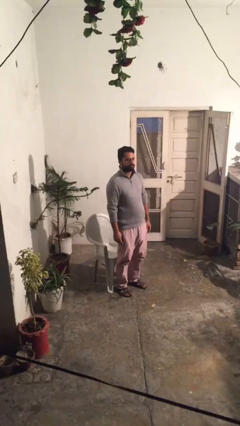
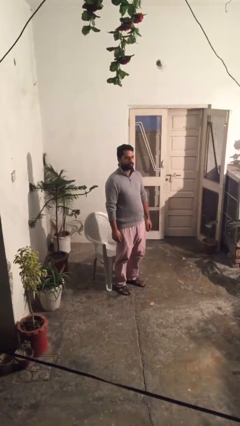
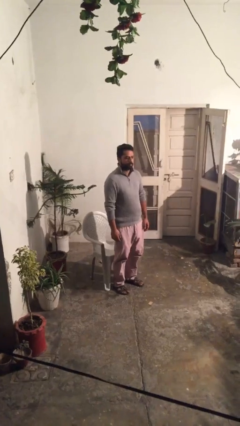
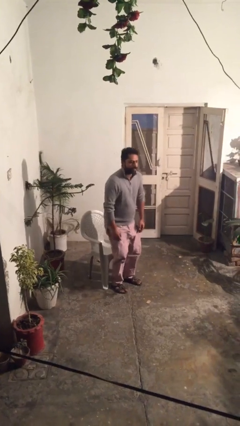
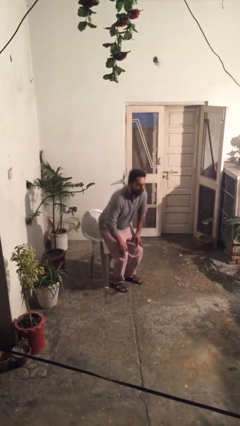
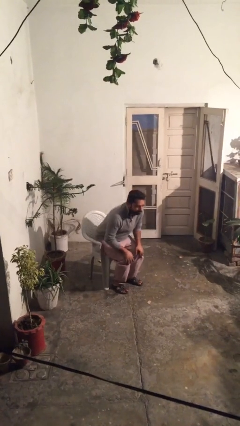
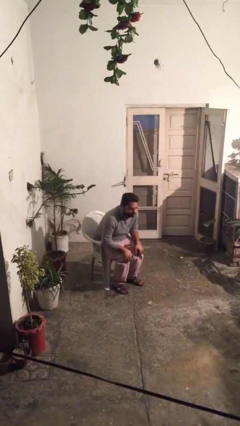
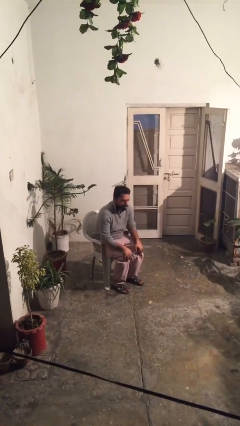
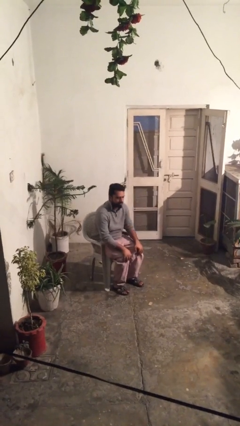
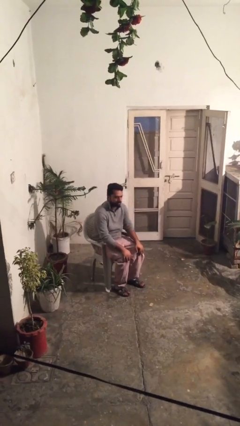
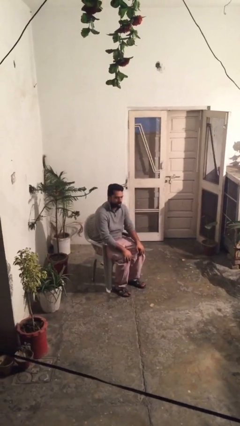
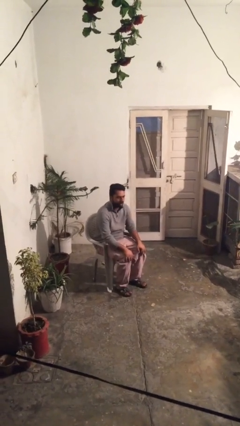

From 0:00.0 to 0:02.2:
person sits down

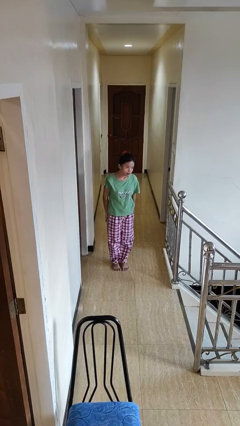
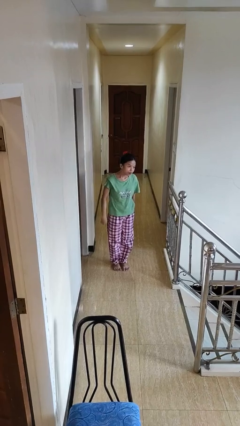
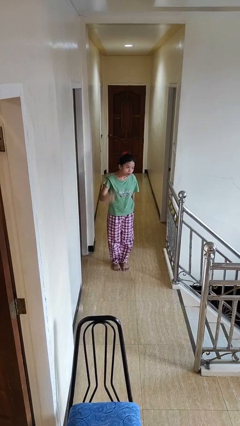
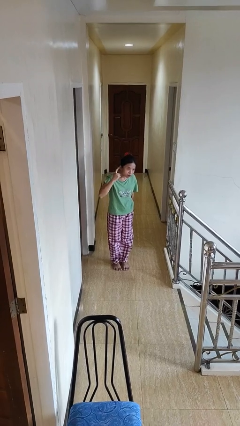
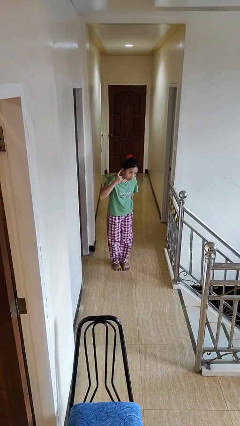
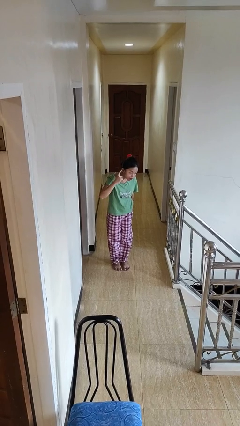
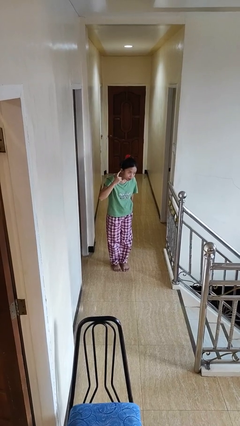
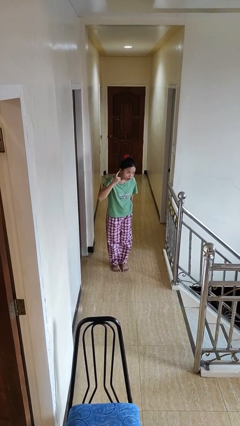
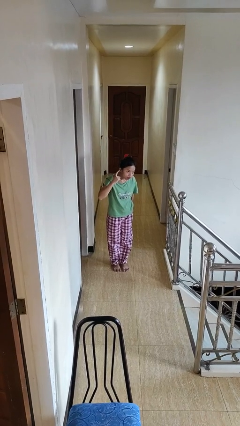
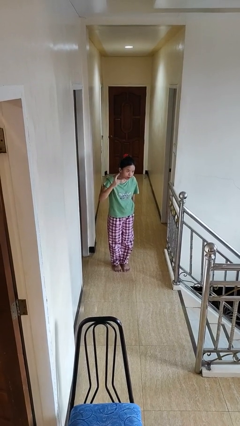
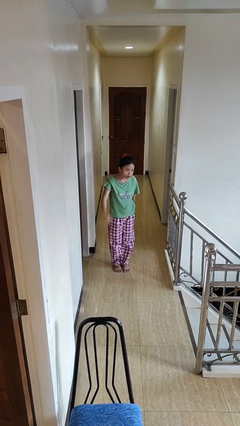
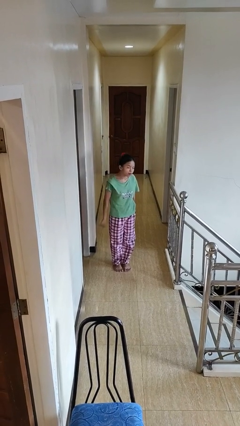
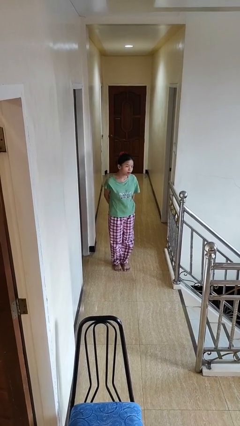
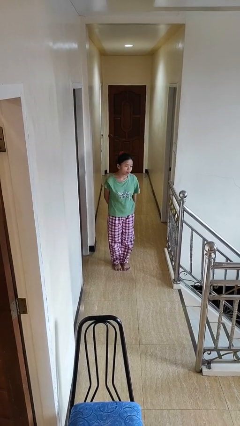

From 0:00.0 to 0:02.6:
person gestures listen closely

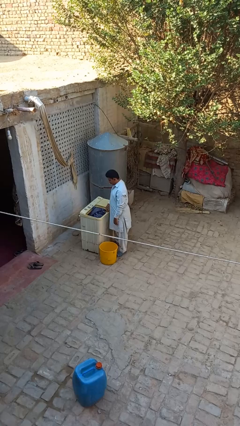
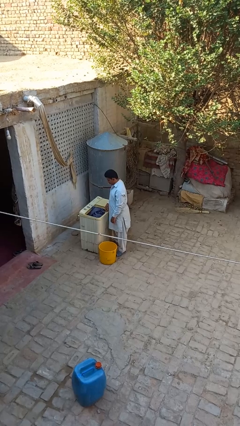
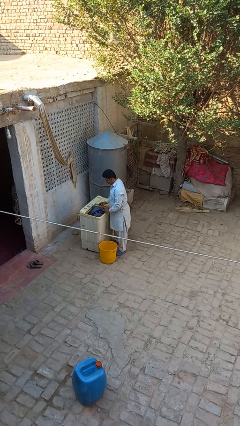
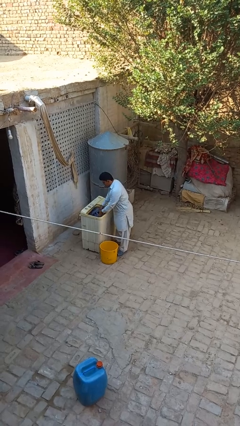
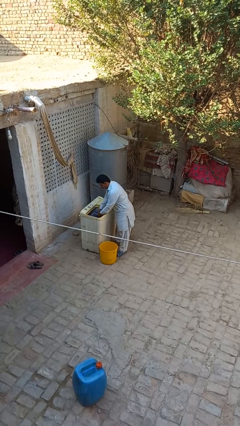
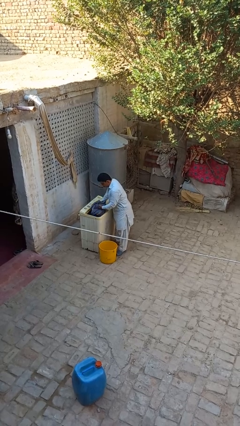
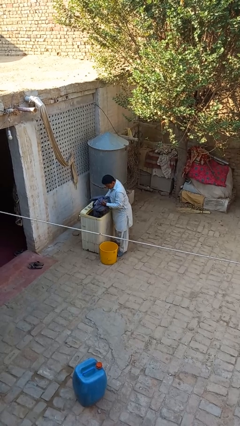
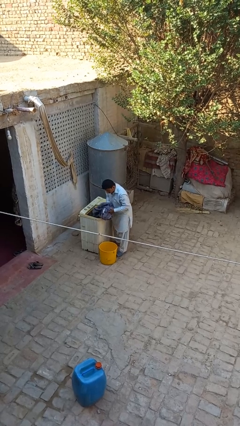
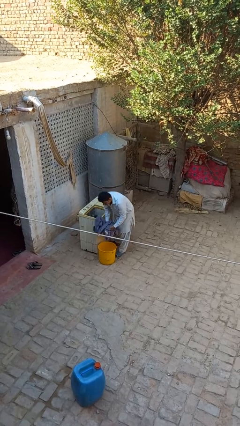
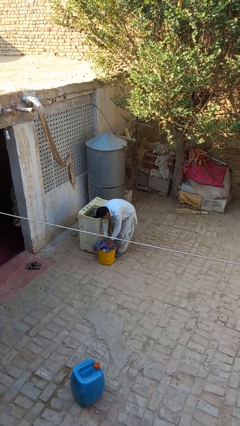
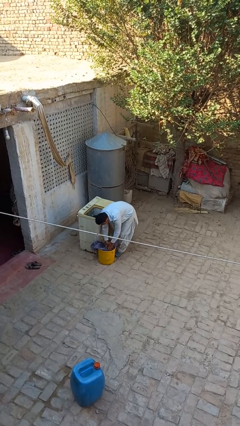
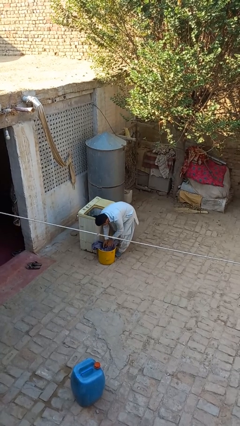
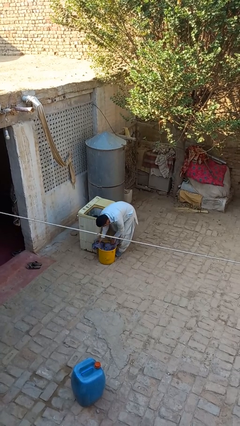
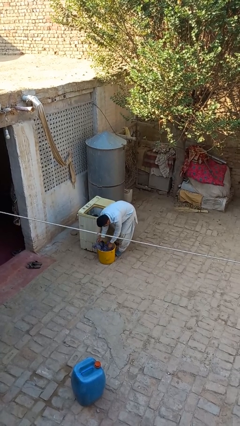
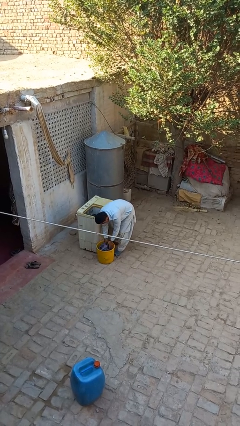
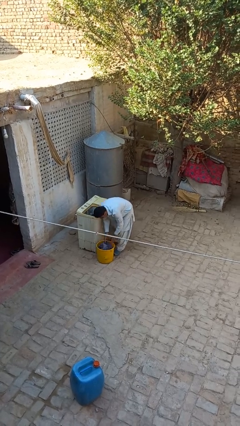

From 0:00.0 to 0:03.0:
person unloads clotheswasher

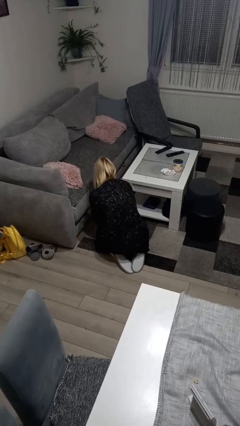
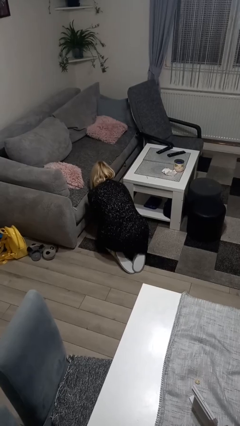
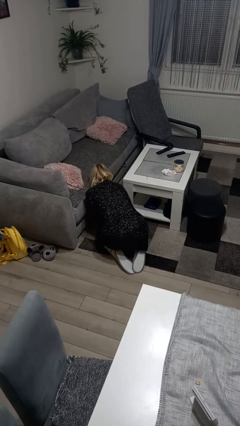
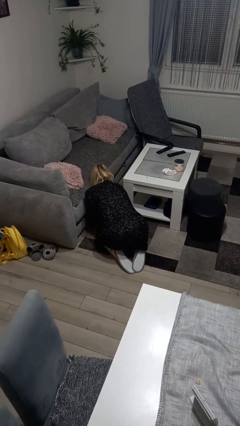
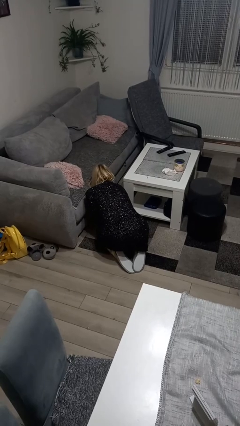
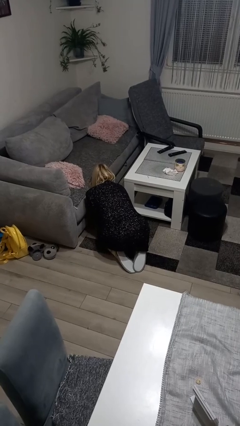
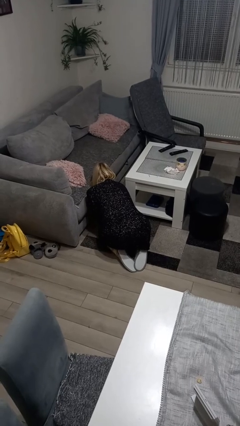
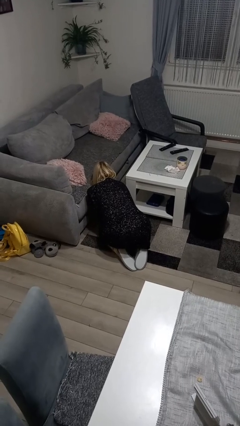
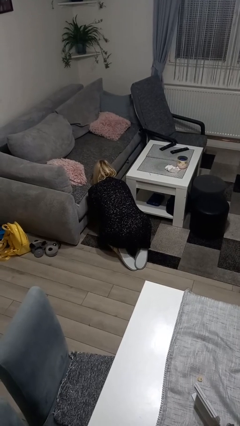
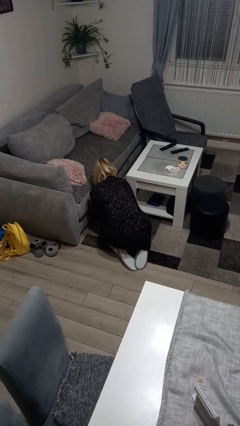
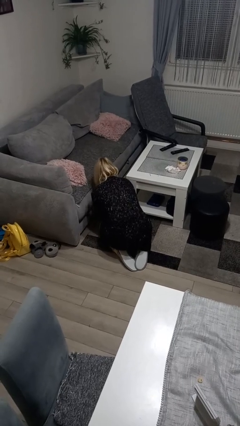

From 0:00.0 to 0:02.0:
person searches under couch

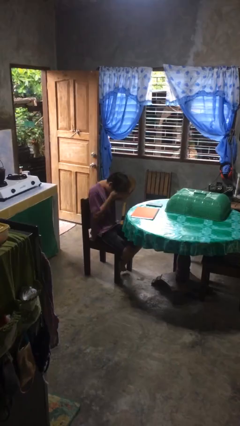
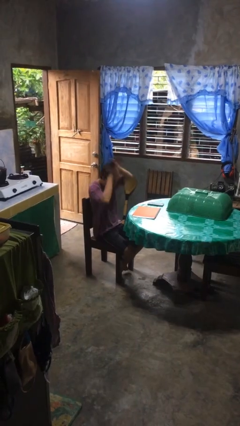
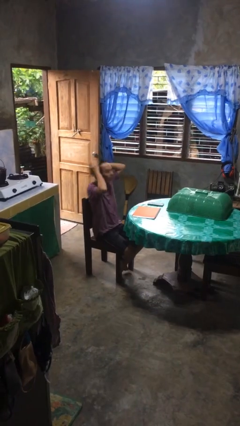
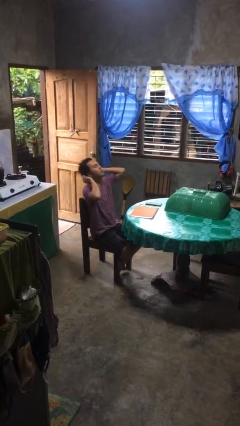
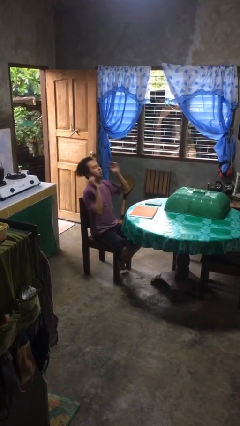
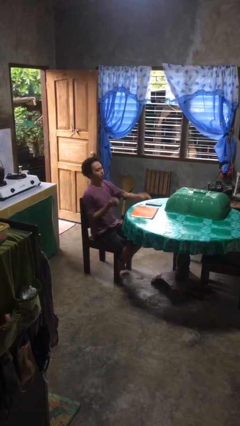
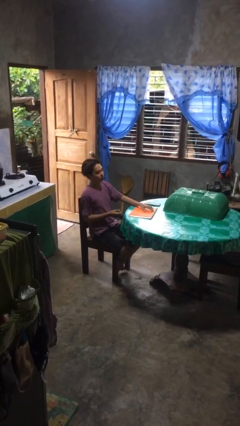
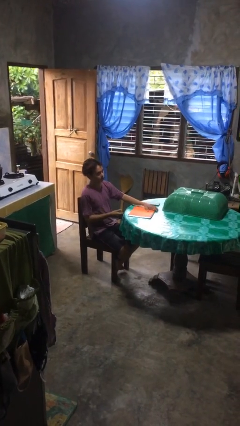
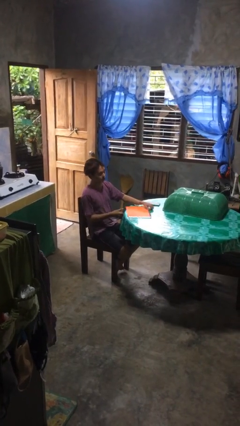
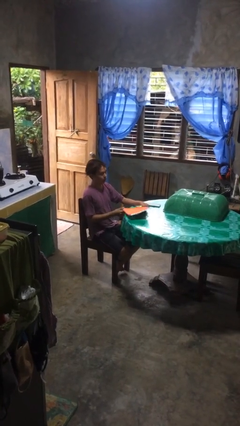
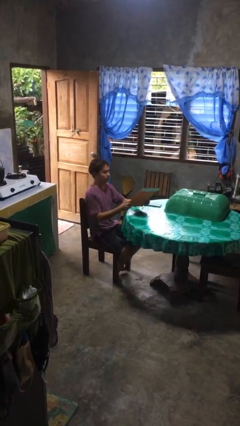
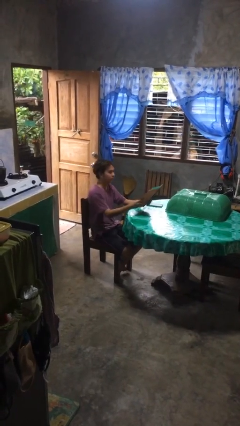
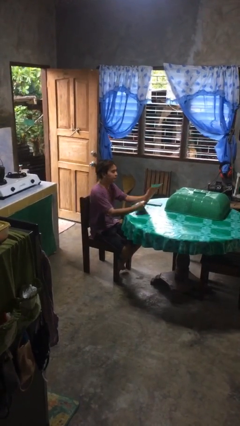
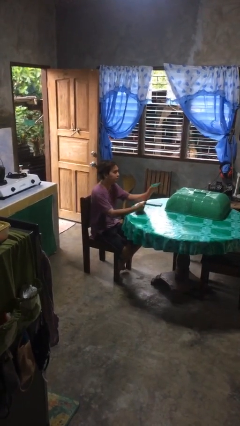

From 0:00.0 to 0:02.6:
person picks up object from table

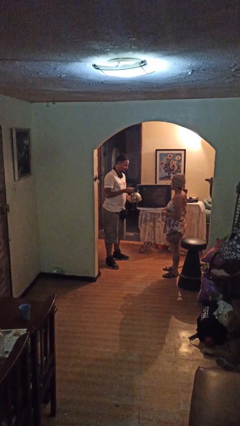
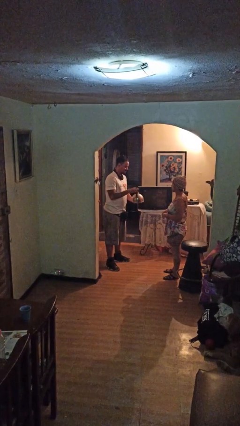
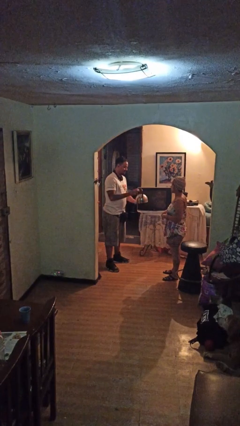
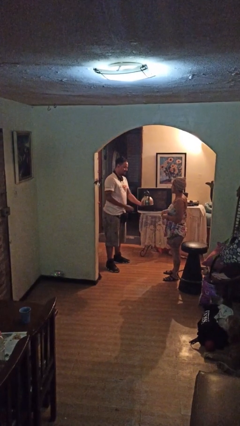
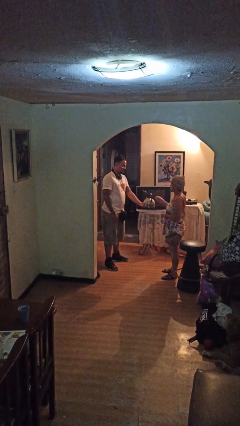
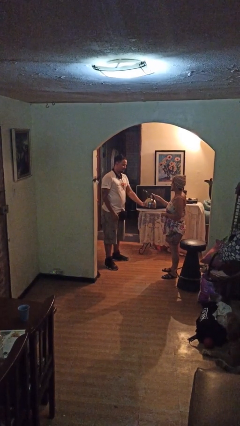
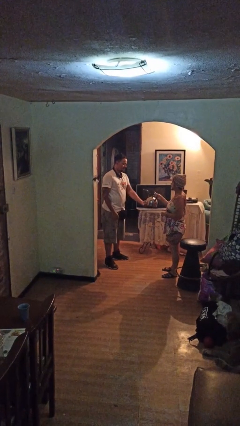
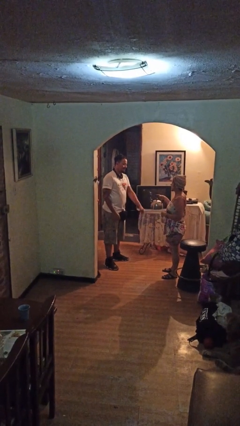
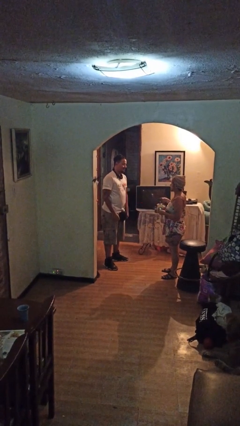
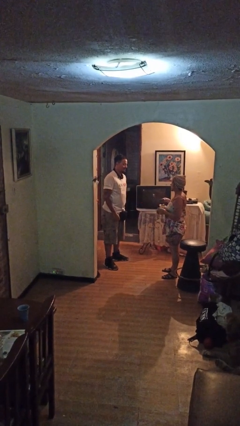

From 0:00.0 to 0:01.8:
person transfers object to person

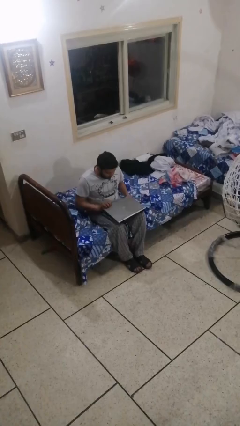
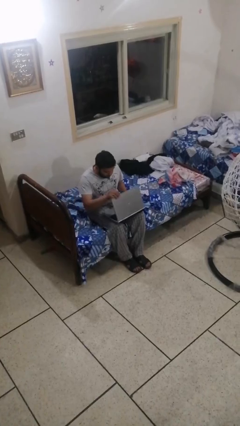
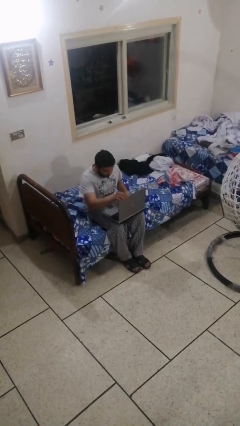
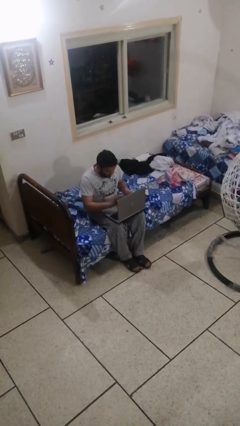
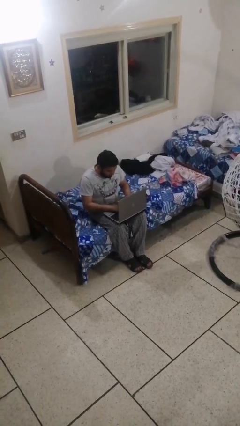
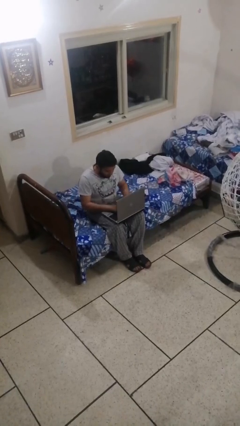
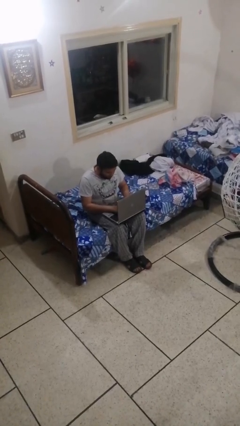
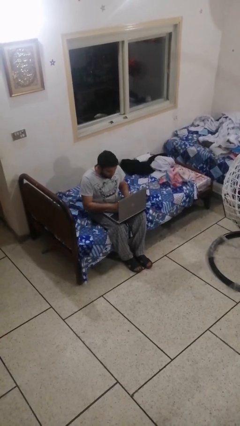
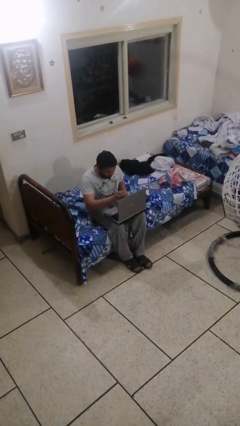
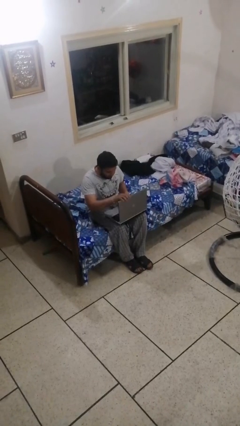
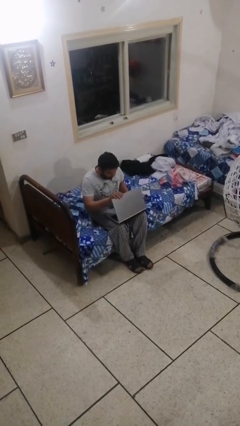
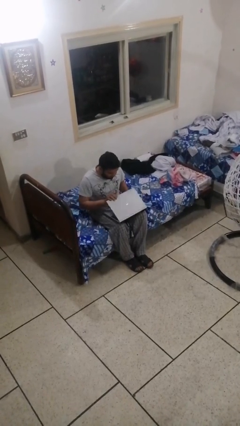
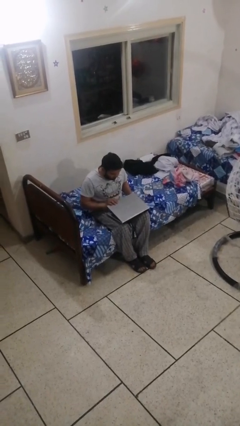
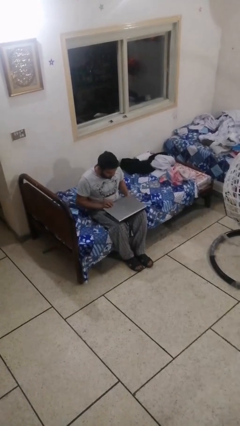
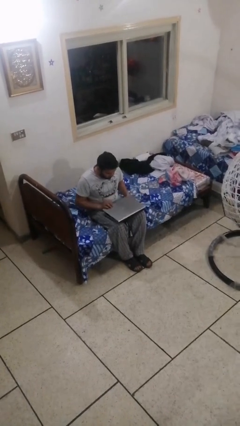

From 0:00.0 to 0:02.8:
person interacts with laptop
